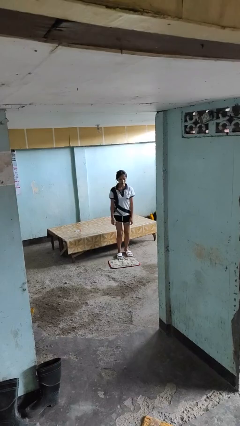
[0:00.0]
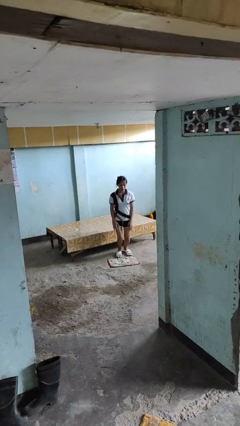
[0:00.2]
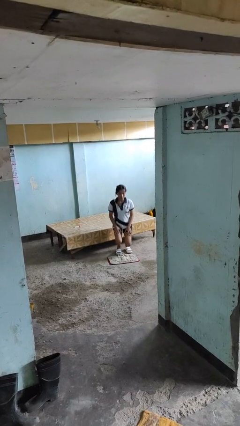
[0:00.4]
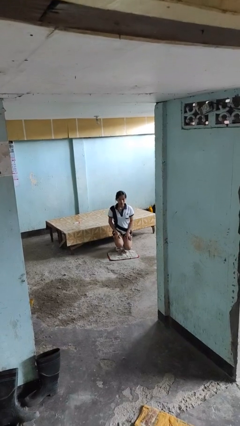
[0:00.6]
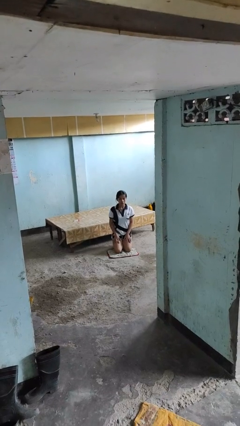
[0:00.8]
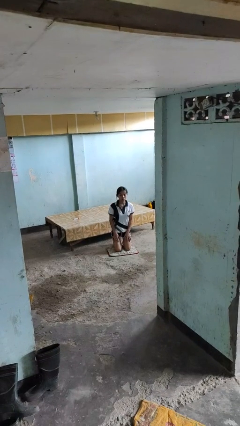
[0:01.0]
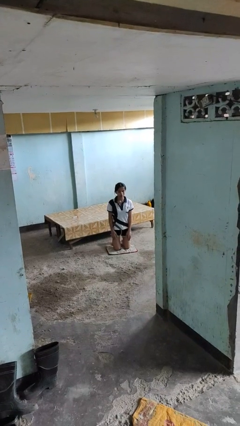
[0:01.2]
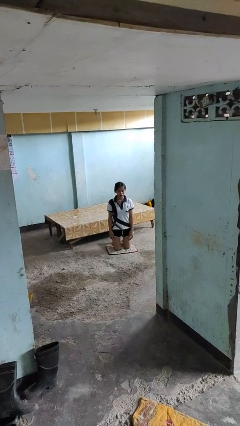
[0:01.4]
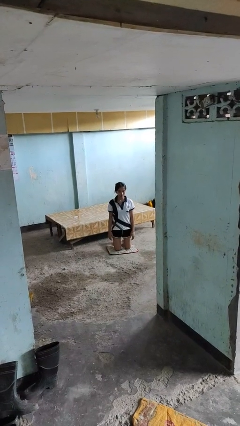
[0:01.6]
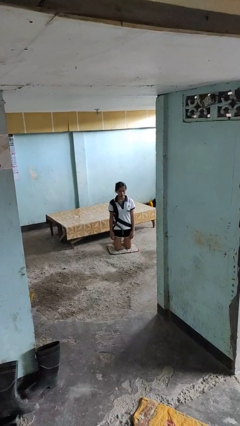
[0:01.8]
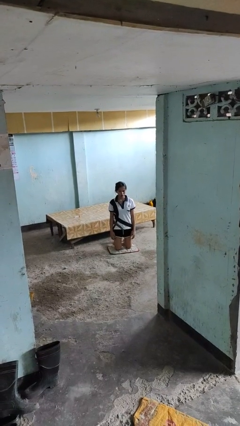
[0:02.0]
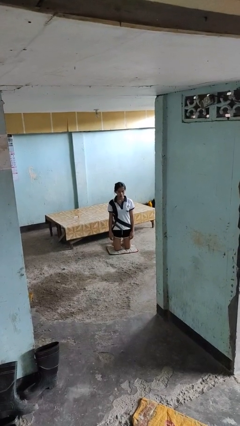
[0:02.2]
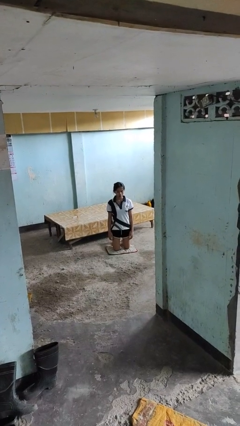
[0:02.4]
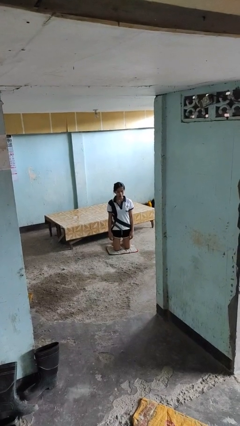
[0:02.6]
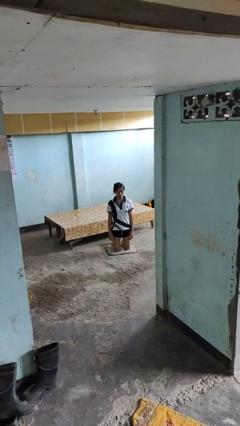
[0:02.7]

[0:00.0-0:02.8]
person kneels

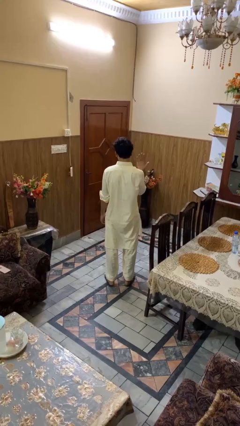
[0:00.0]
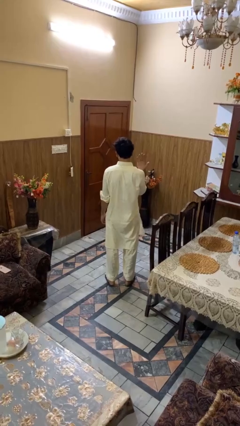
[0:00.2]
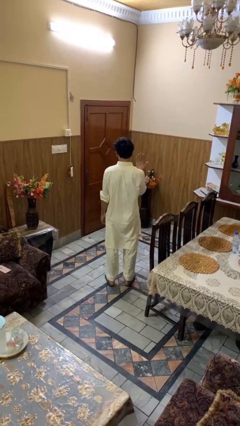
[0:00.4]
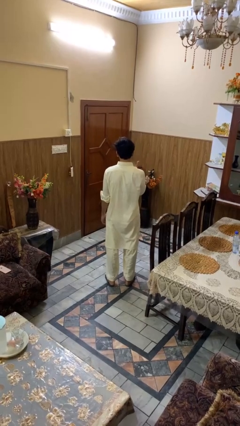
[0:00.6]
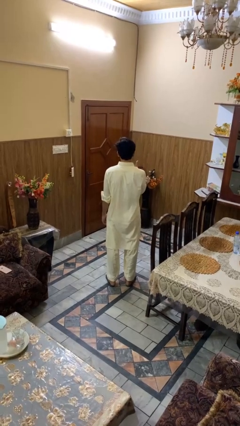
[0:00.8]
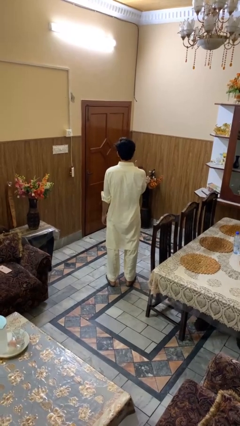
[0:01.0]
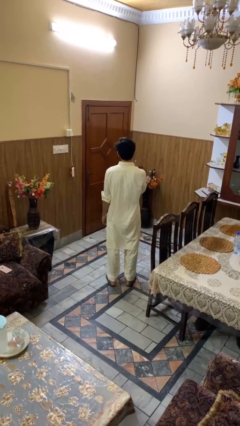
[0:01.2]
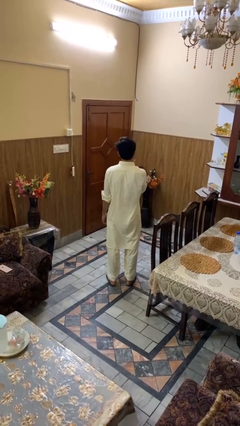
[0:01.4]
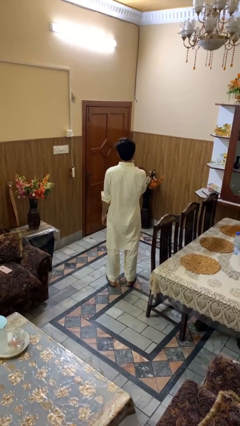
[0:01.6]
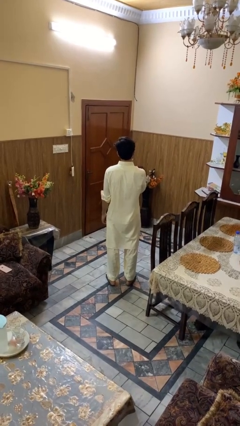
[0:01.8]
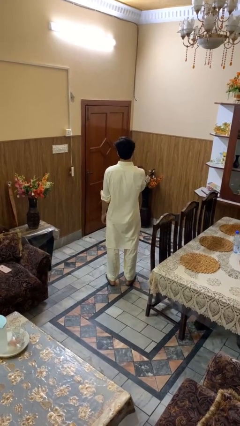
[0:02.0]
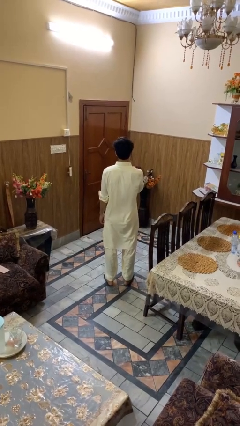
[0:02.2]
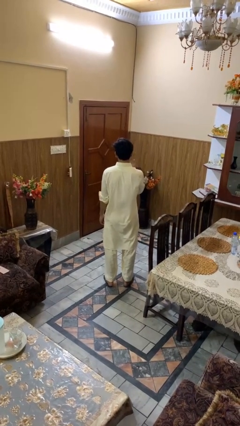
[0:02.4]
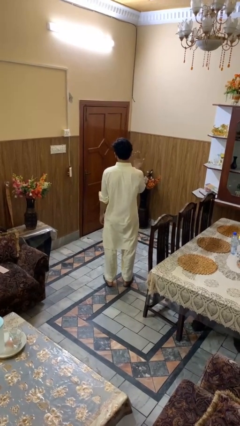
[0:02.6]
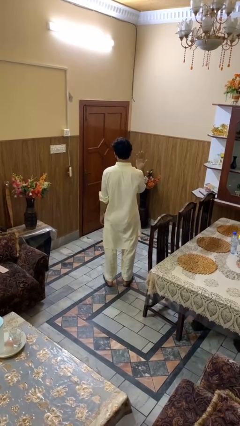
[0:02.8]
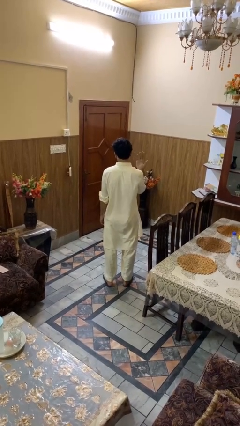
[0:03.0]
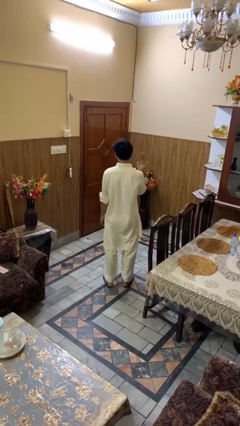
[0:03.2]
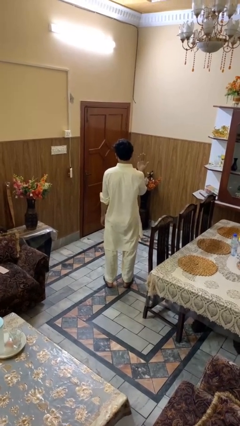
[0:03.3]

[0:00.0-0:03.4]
person licks fingers

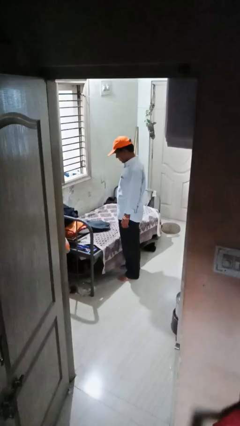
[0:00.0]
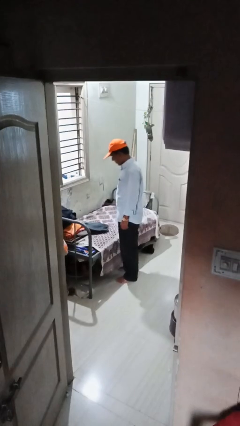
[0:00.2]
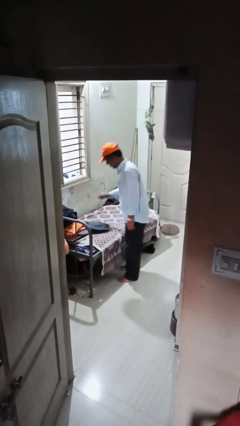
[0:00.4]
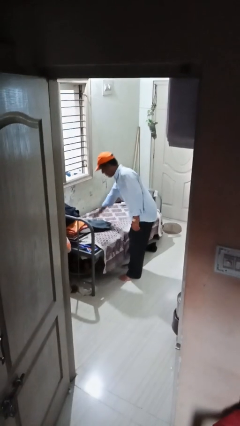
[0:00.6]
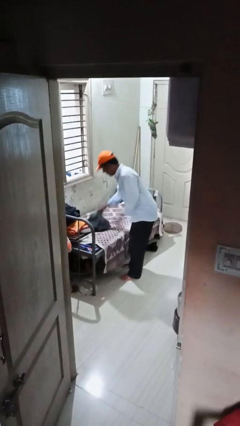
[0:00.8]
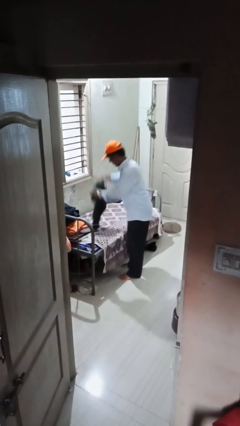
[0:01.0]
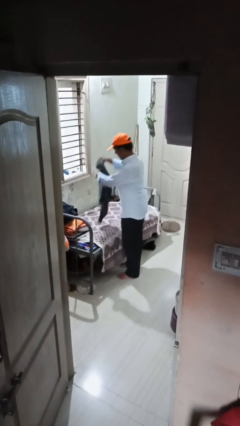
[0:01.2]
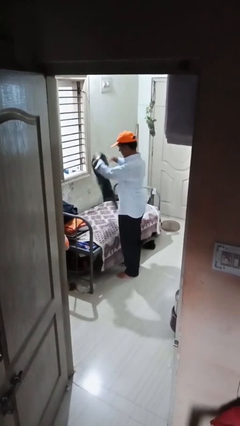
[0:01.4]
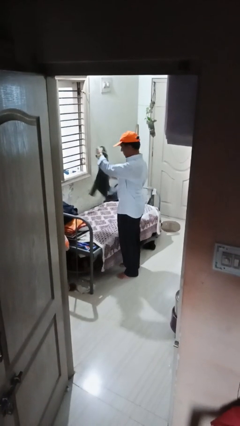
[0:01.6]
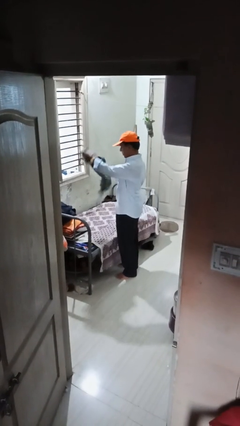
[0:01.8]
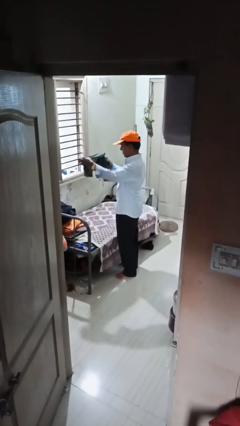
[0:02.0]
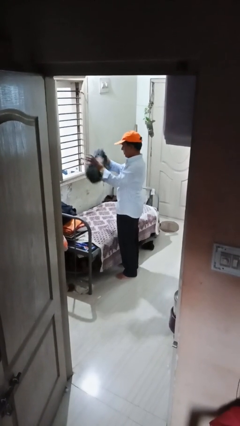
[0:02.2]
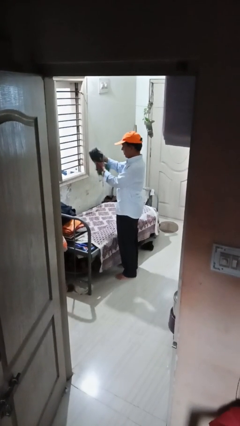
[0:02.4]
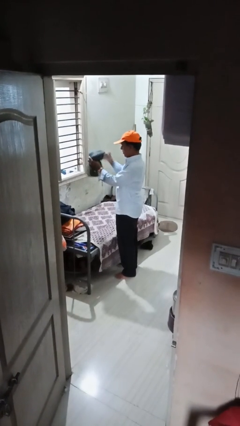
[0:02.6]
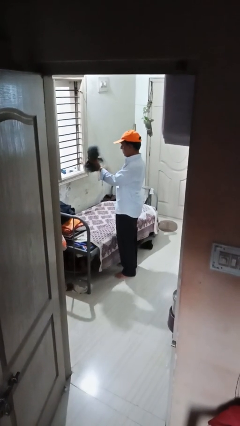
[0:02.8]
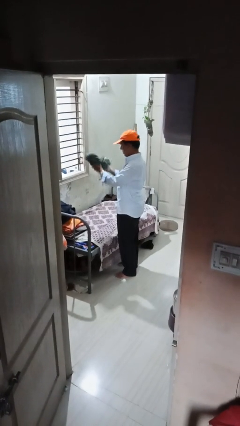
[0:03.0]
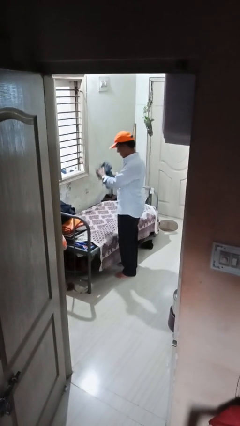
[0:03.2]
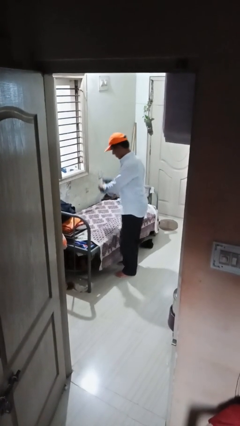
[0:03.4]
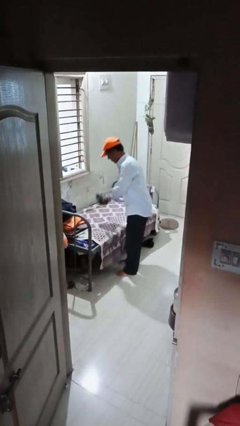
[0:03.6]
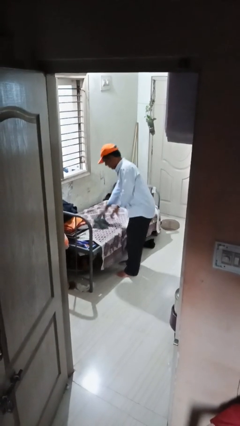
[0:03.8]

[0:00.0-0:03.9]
person folds shirt

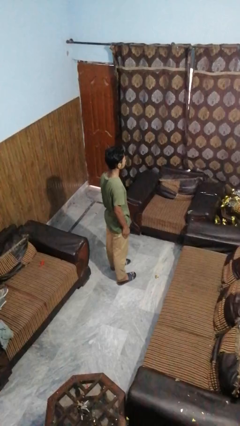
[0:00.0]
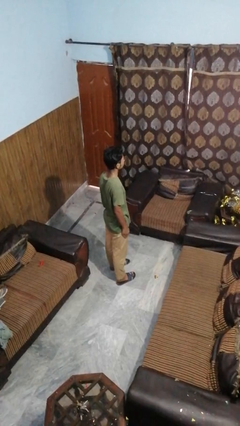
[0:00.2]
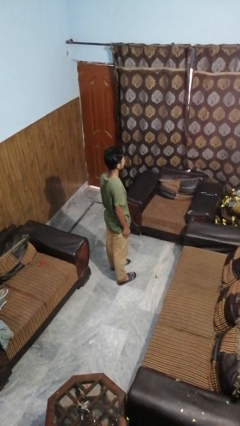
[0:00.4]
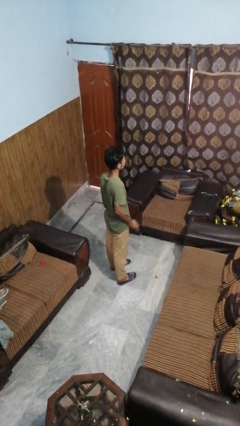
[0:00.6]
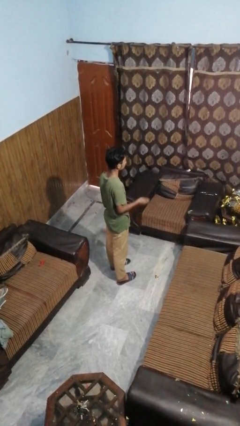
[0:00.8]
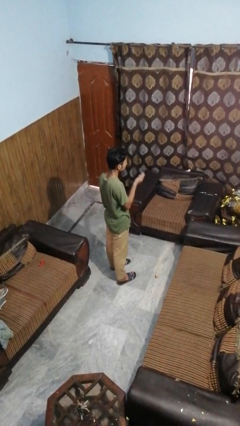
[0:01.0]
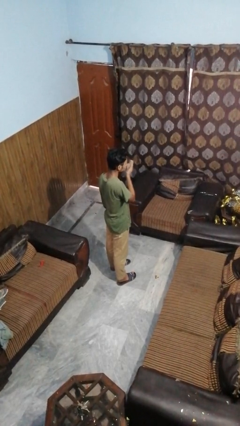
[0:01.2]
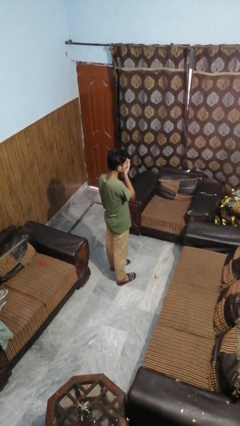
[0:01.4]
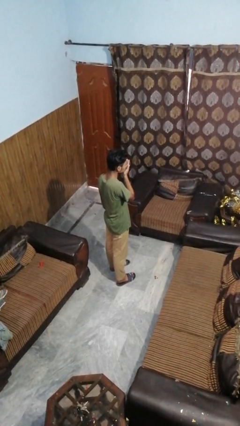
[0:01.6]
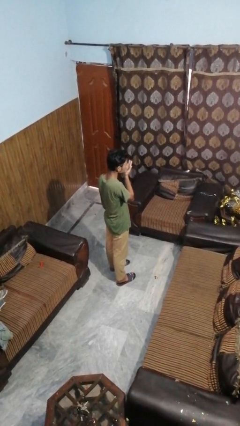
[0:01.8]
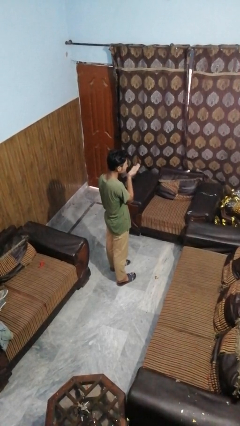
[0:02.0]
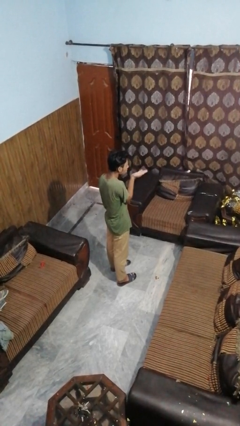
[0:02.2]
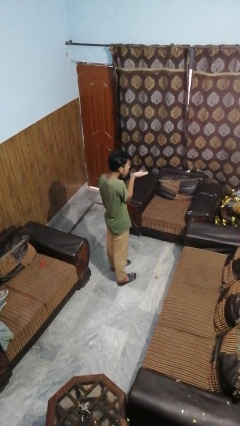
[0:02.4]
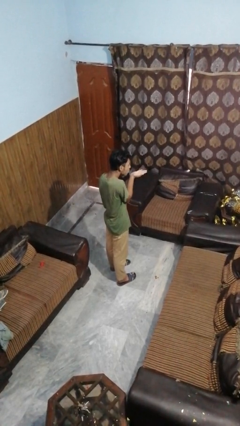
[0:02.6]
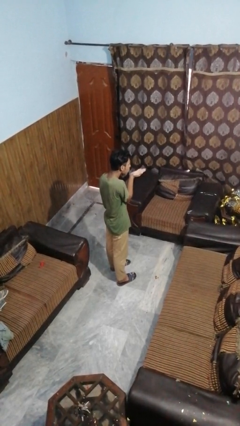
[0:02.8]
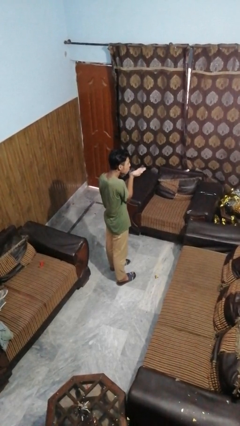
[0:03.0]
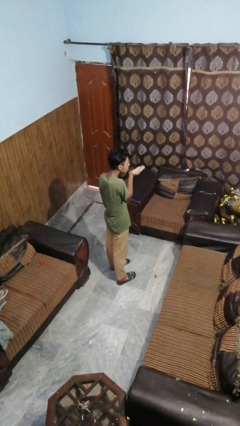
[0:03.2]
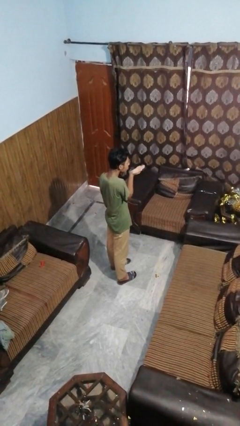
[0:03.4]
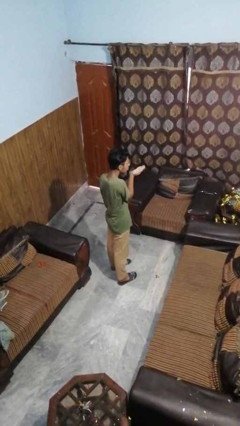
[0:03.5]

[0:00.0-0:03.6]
person gestures blow kiss

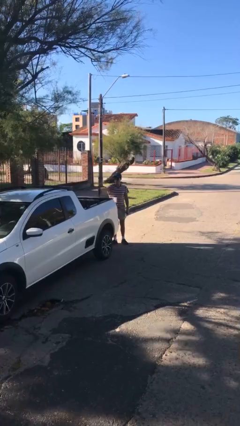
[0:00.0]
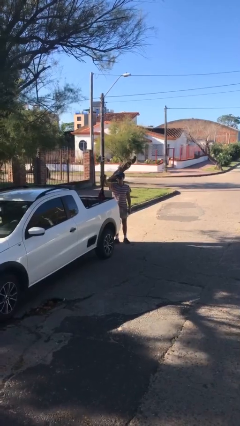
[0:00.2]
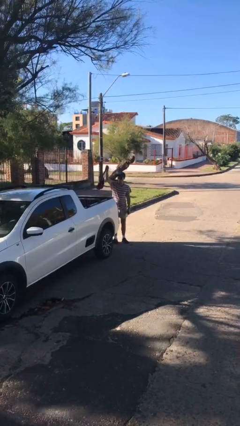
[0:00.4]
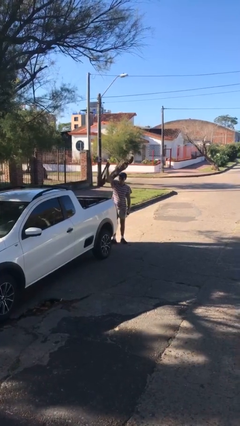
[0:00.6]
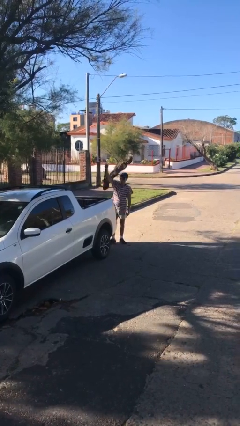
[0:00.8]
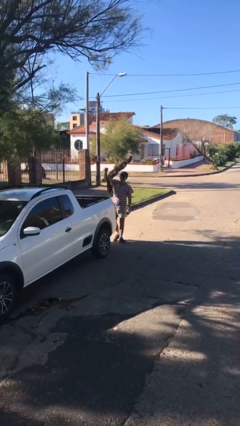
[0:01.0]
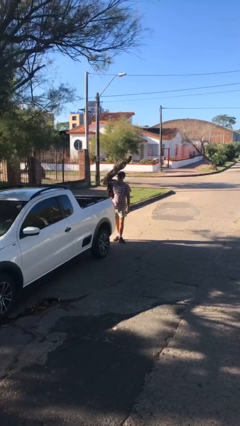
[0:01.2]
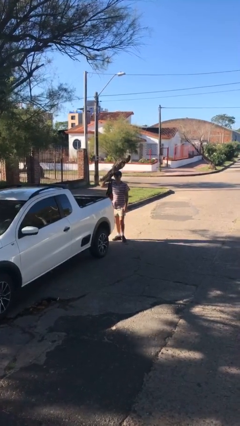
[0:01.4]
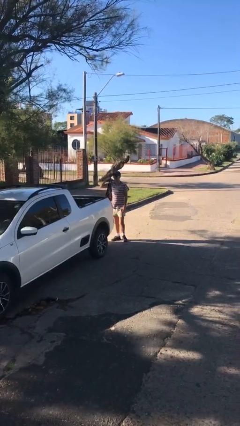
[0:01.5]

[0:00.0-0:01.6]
person unloads car

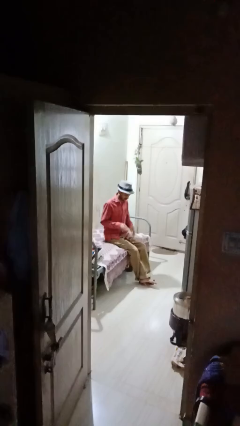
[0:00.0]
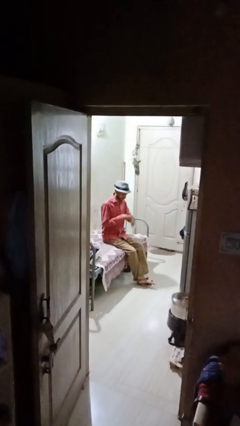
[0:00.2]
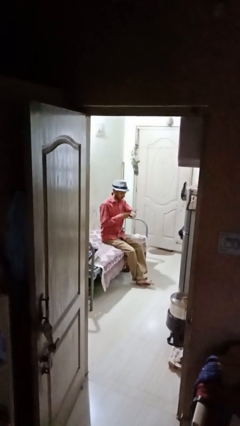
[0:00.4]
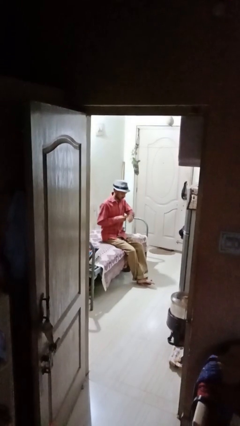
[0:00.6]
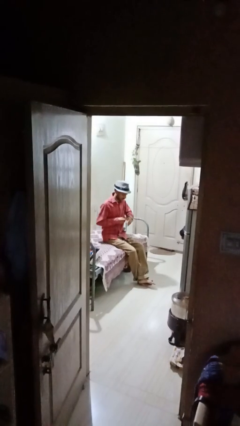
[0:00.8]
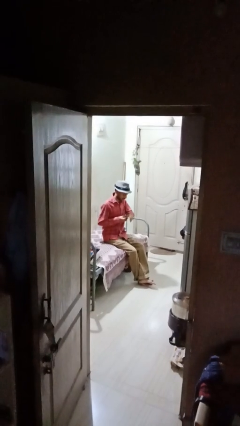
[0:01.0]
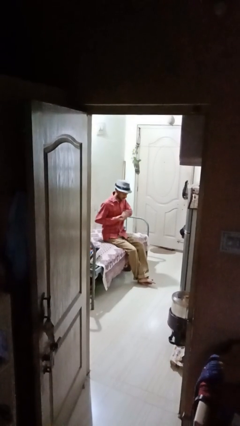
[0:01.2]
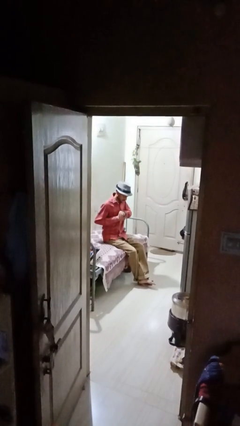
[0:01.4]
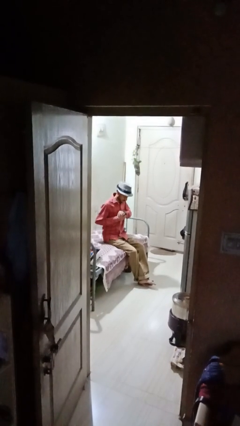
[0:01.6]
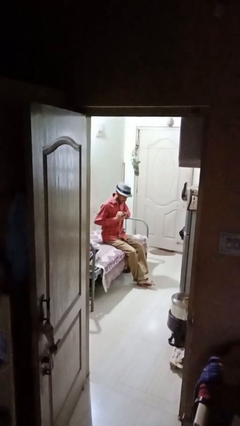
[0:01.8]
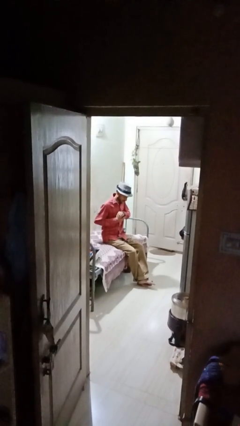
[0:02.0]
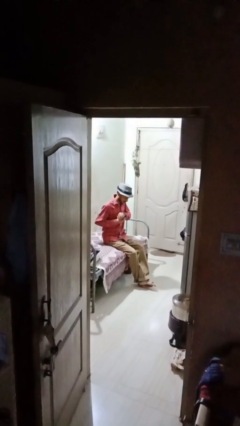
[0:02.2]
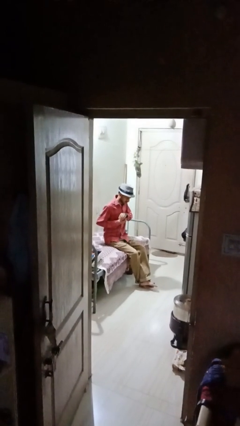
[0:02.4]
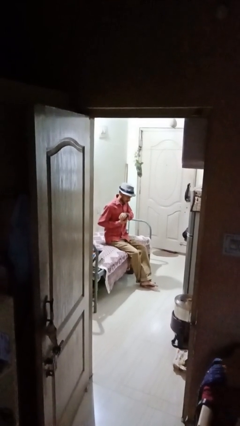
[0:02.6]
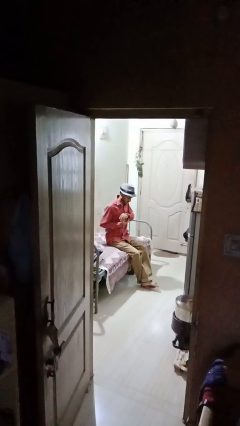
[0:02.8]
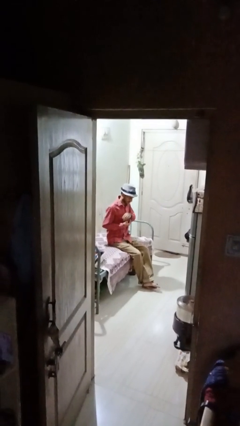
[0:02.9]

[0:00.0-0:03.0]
person puts on wristwatch
